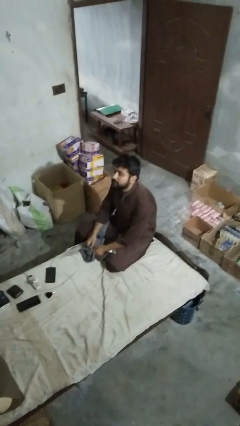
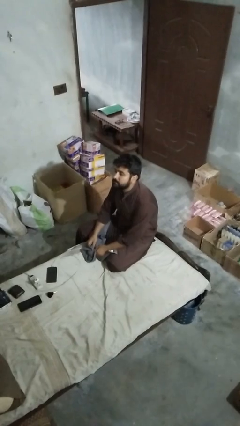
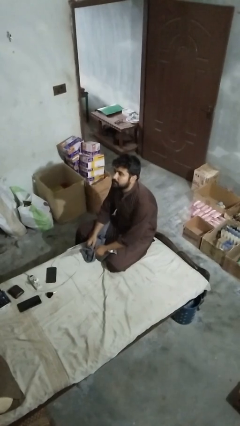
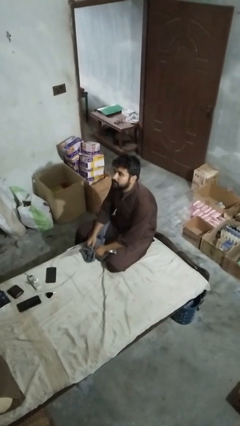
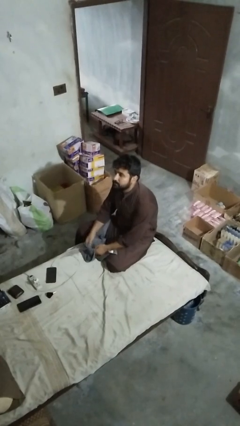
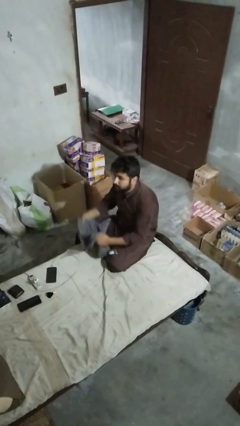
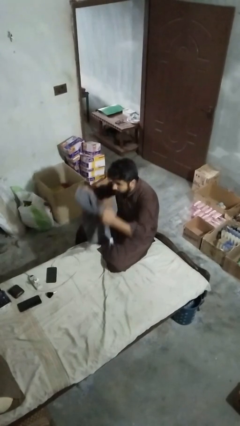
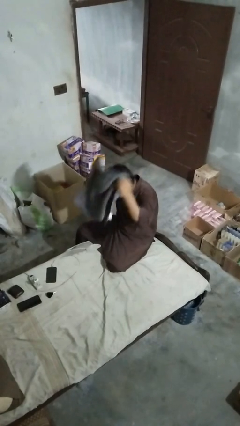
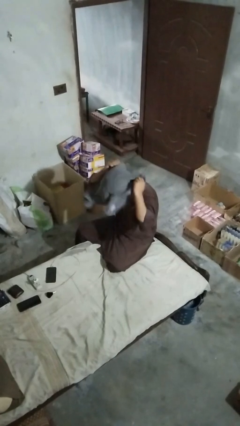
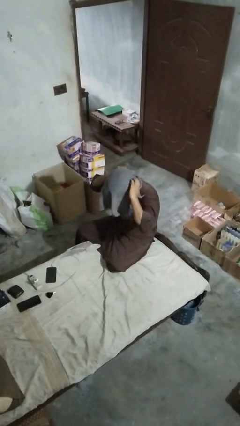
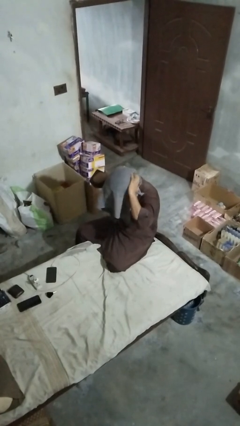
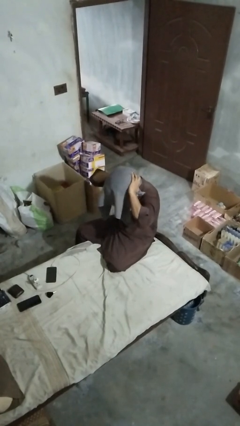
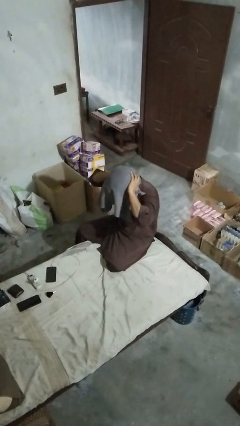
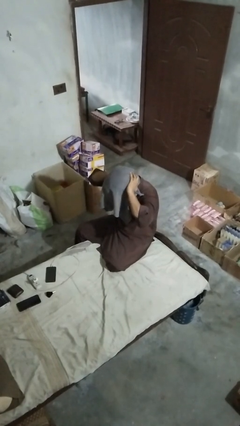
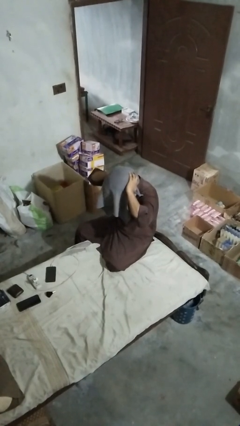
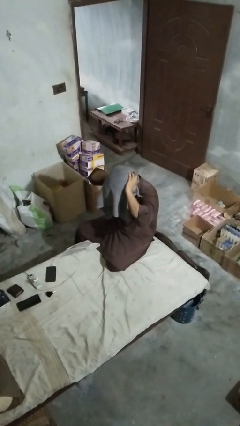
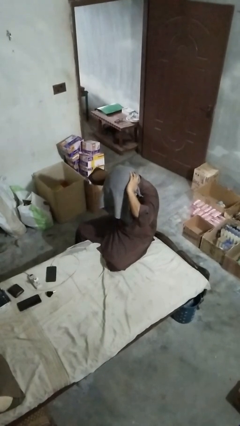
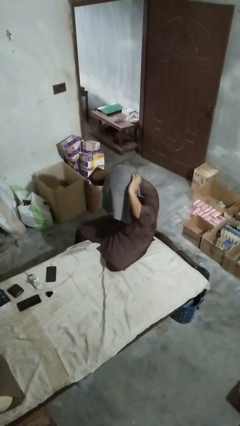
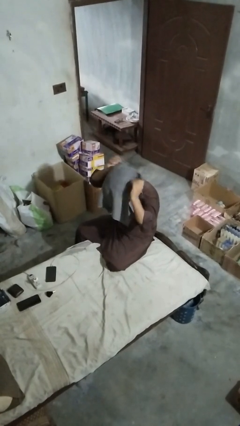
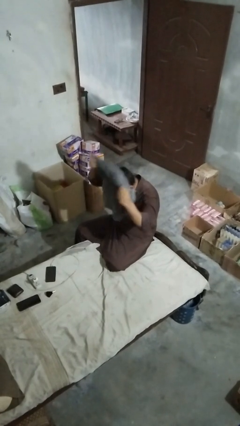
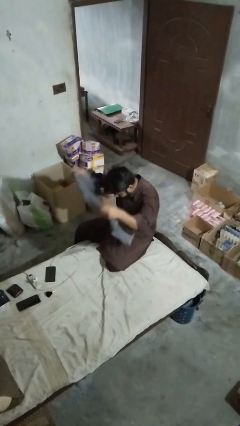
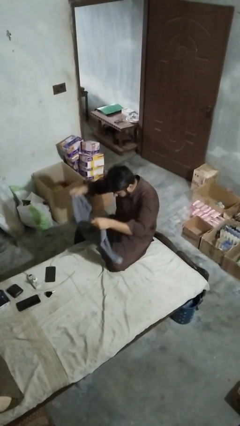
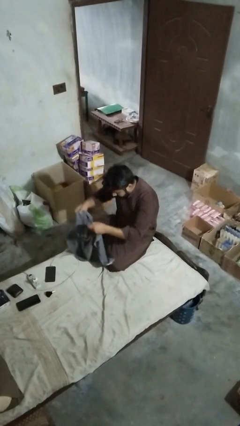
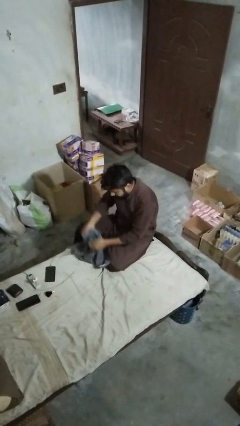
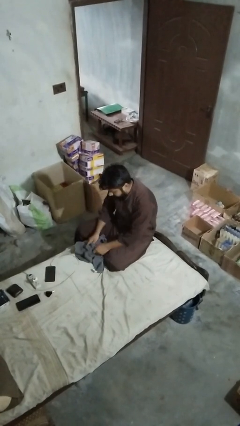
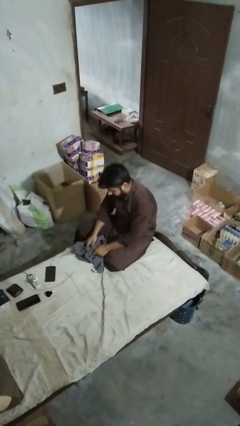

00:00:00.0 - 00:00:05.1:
person dries hair with towel

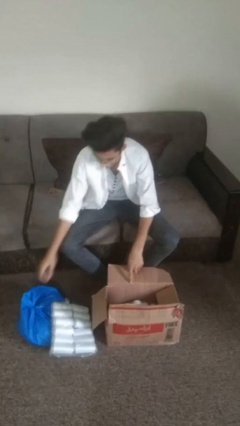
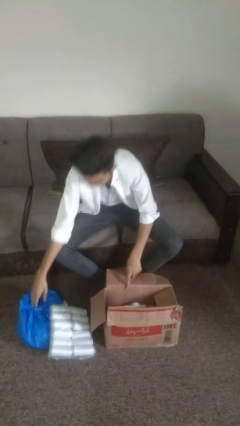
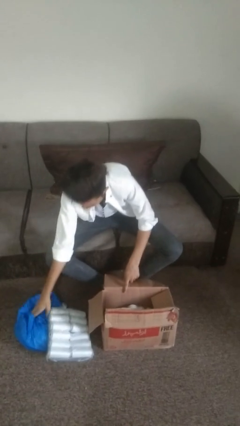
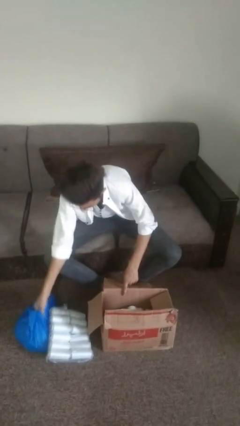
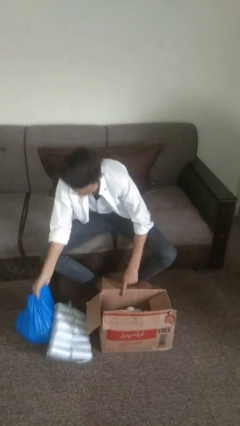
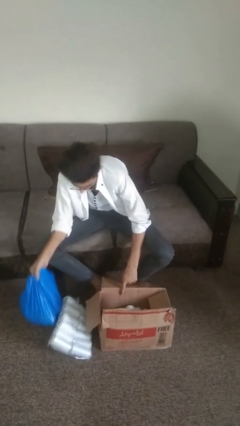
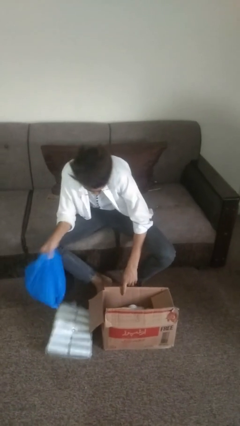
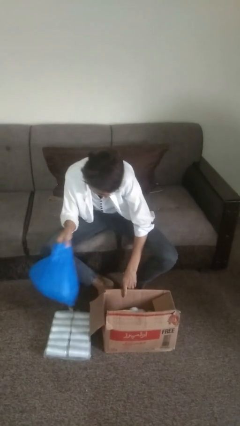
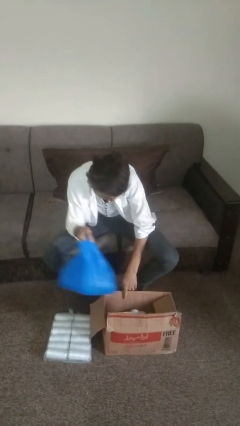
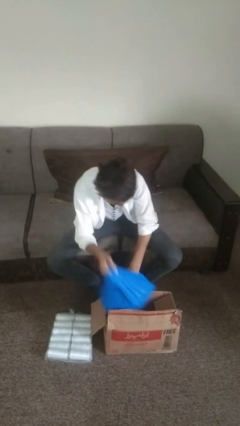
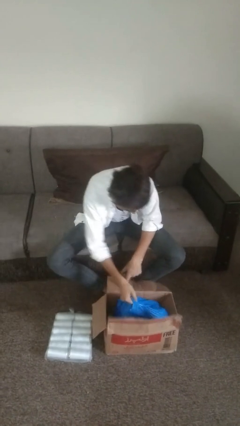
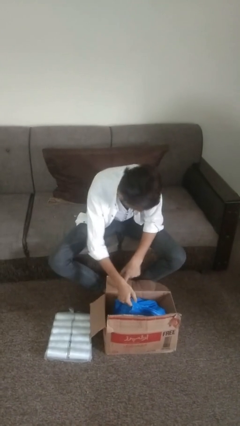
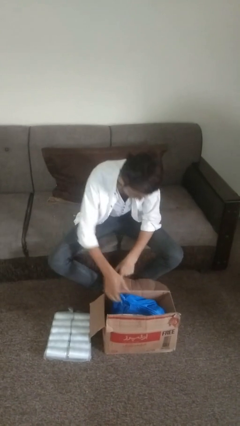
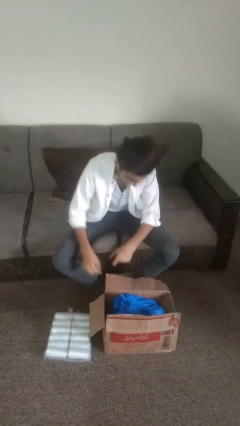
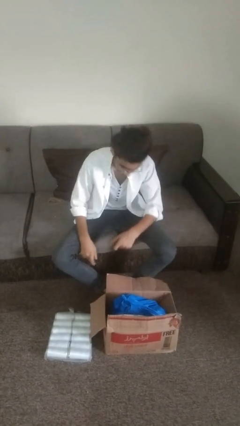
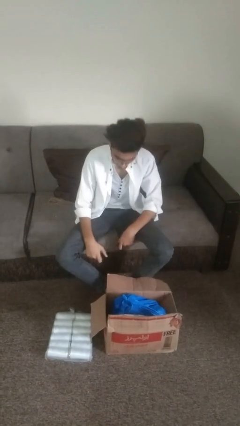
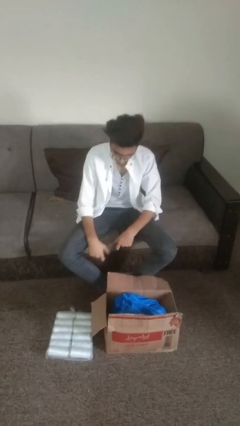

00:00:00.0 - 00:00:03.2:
person puts object into box

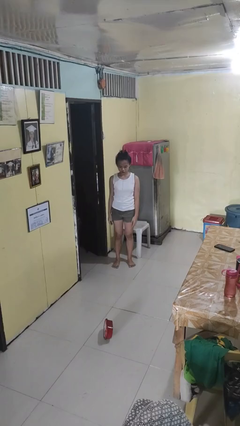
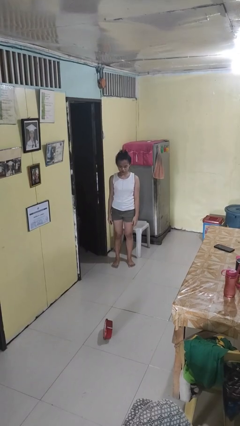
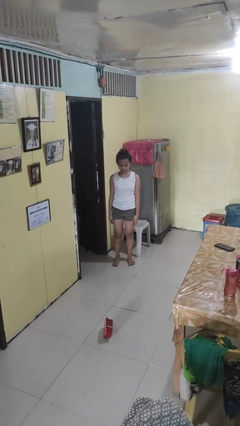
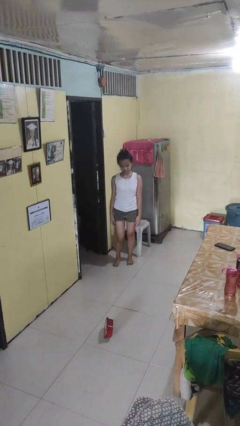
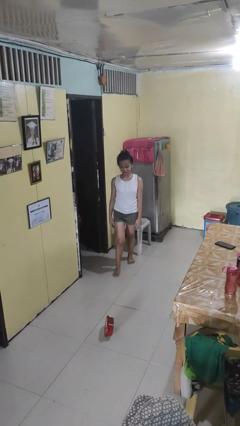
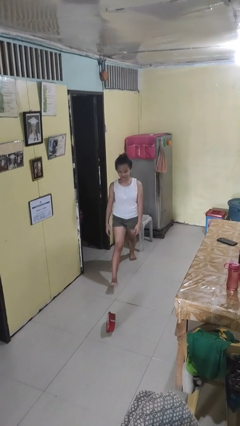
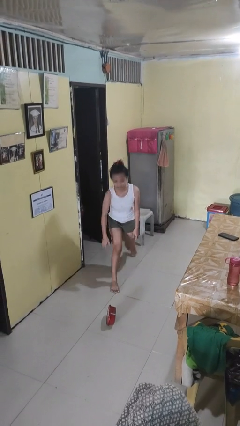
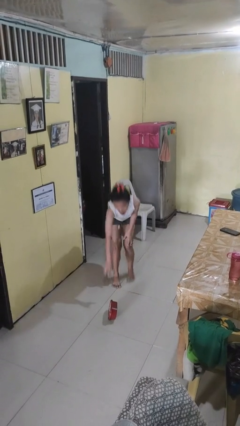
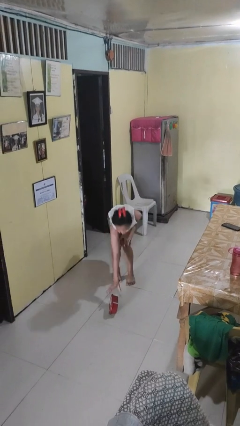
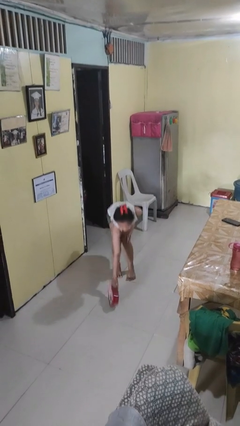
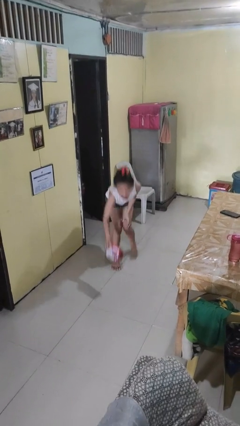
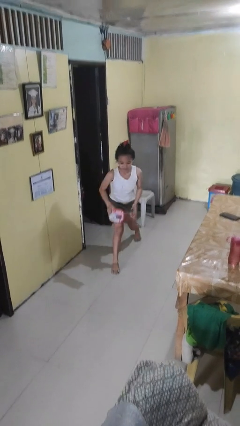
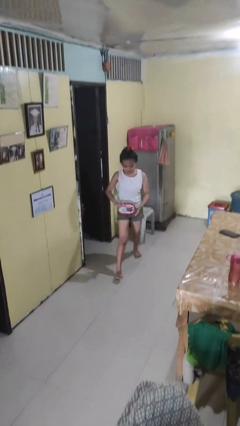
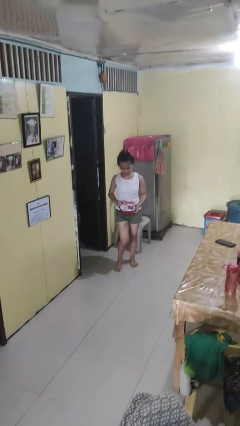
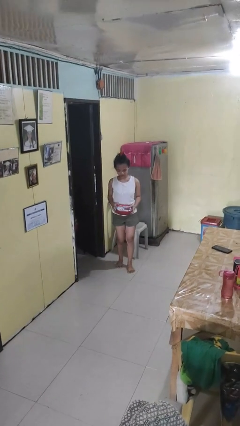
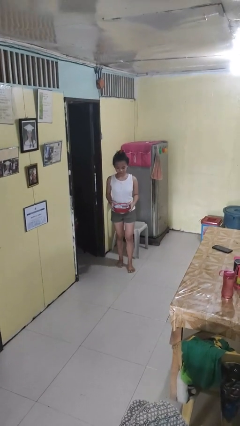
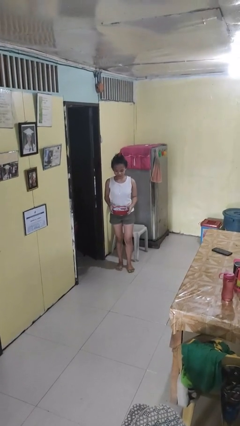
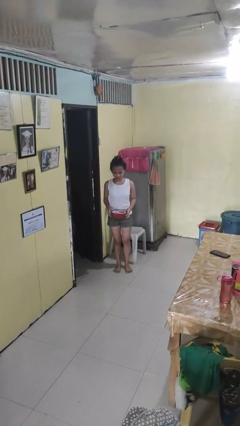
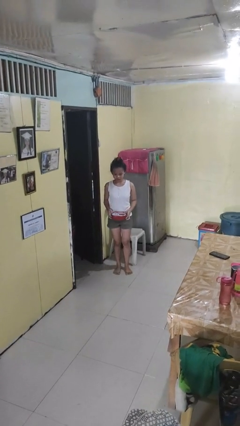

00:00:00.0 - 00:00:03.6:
person picks up object from floor

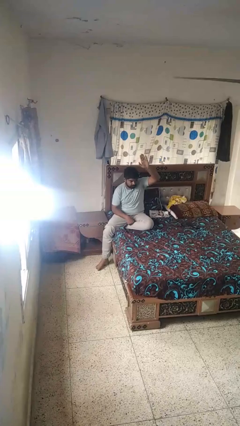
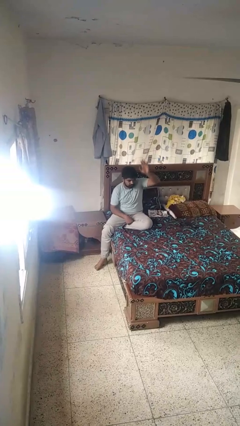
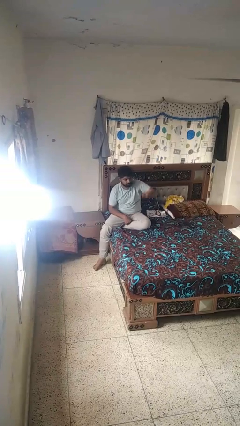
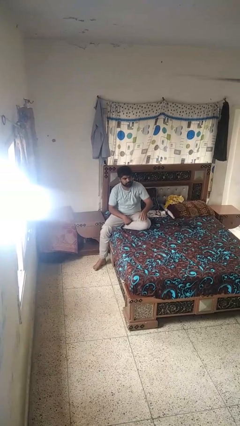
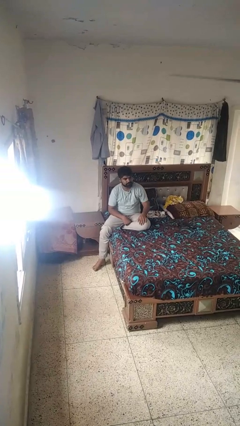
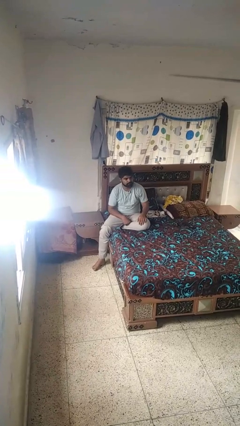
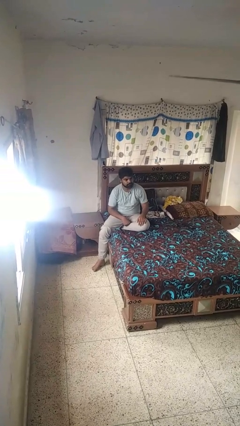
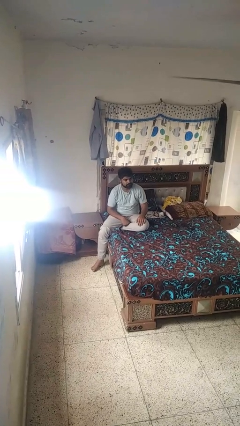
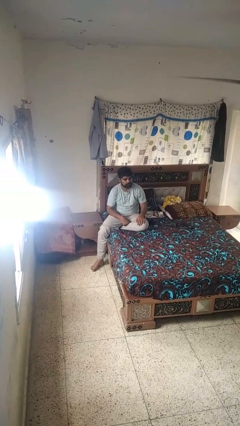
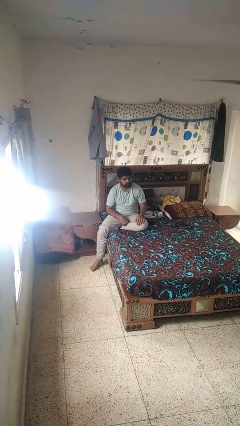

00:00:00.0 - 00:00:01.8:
person gestures lower hand

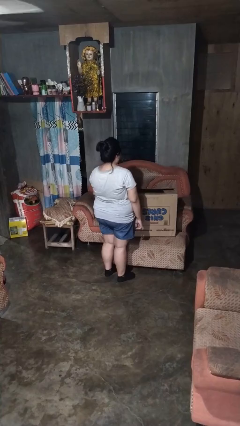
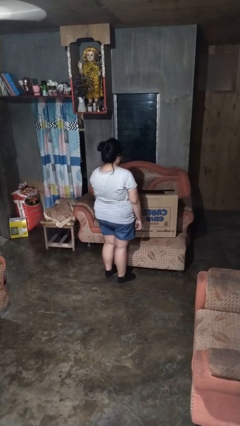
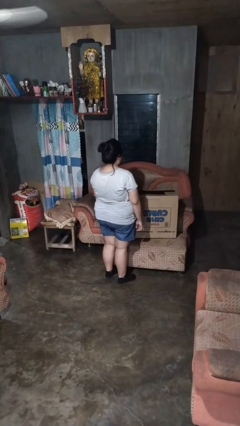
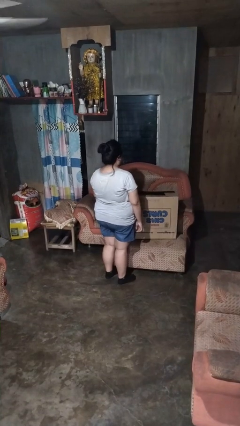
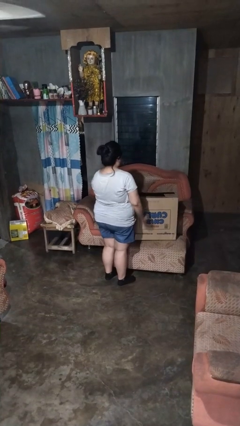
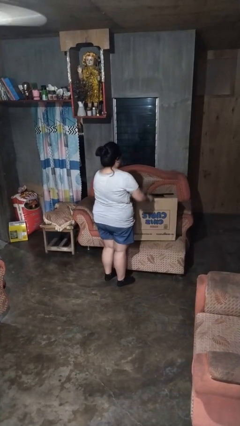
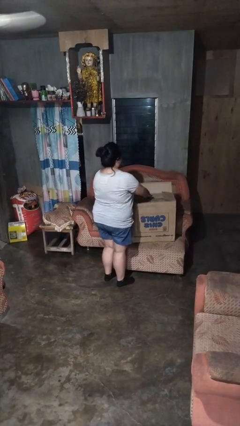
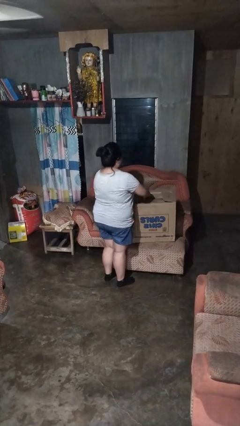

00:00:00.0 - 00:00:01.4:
person opens box

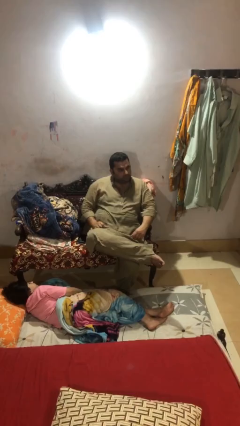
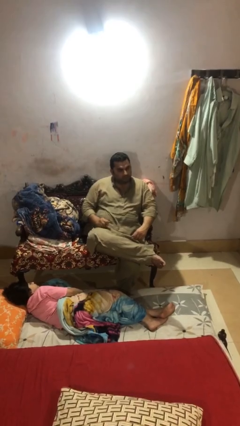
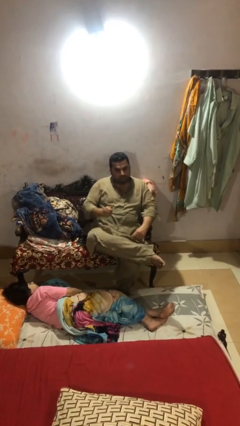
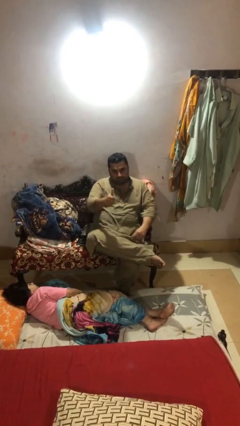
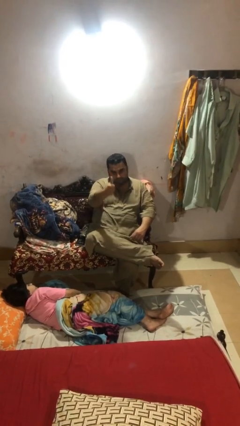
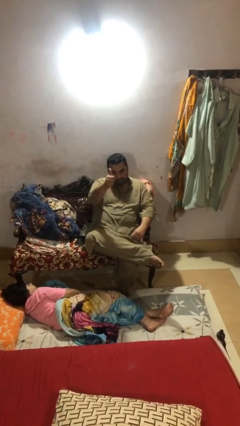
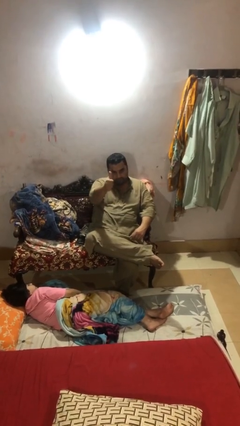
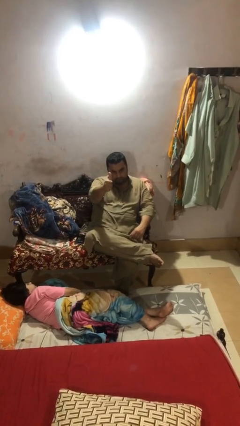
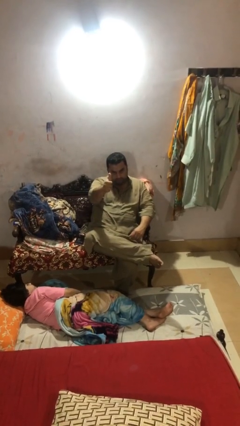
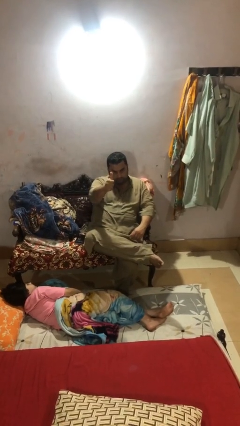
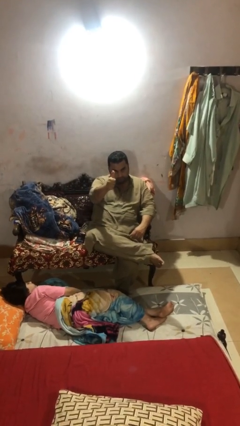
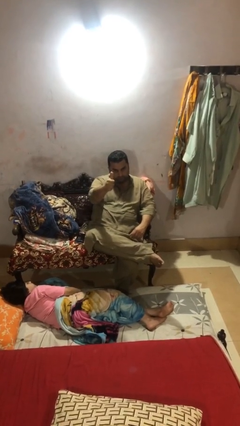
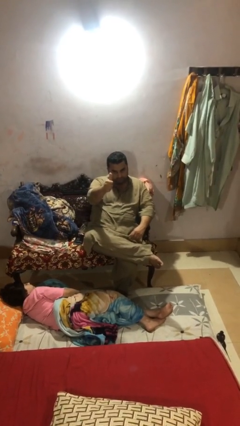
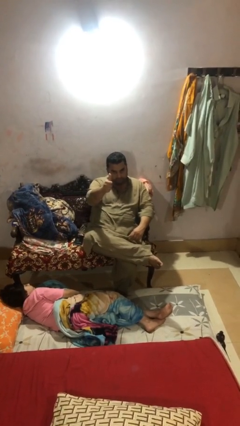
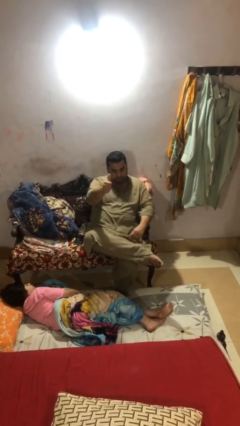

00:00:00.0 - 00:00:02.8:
person gestures thumbs up
